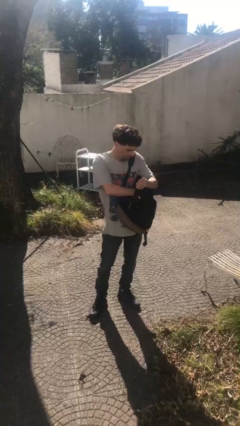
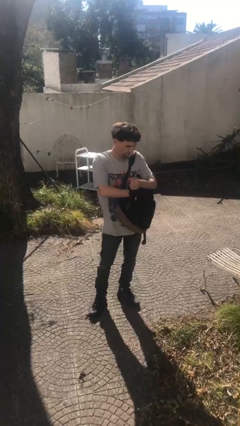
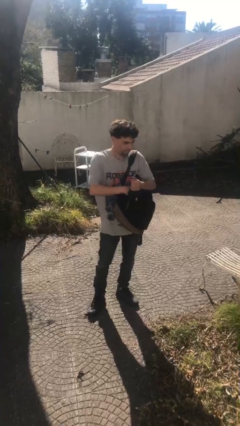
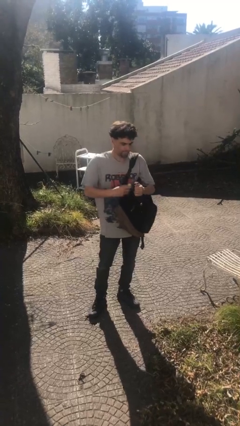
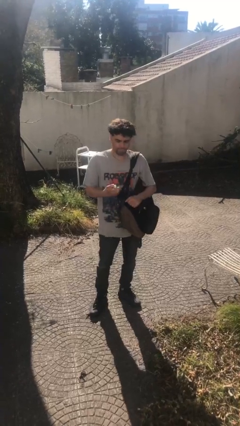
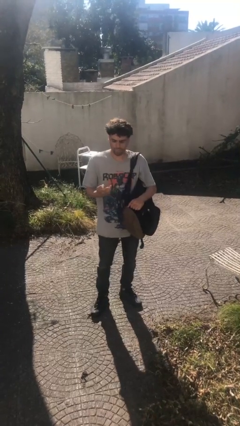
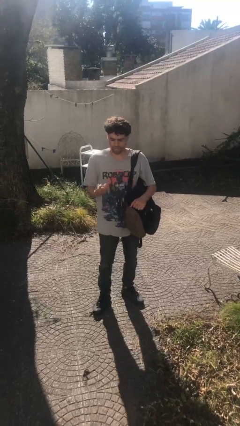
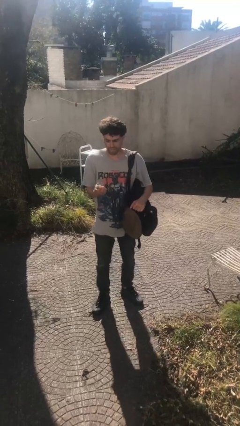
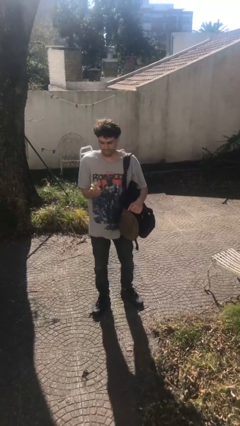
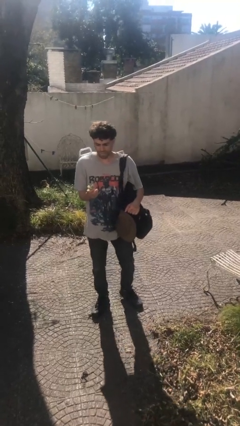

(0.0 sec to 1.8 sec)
person takes object from backpack

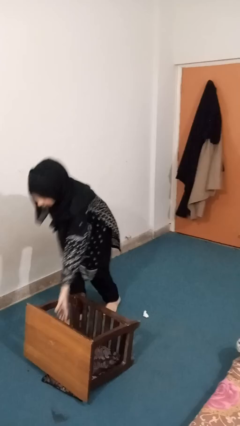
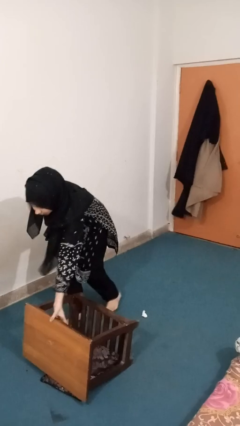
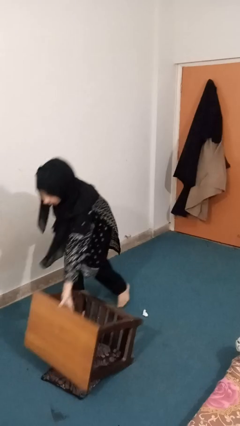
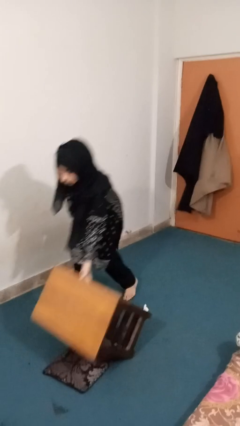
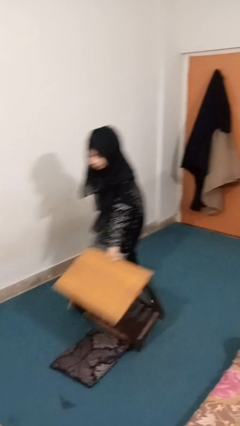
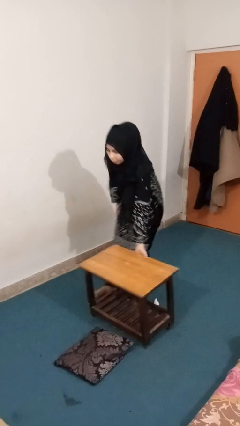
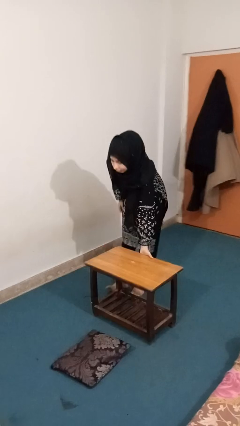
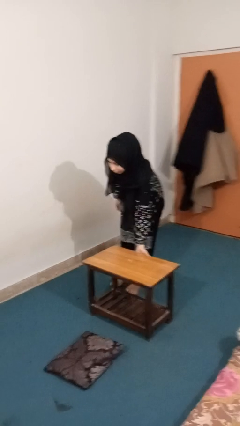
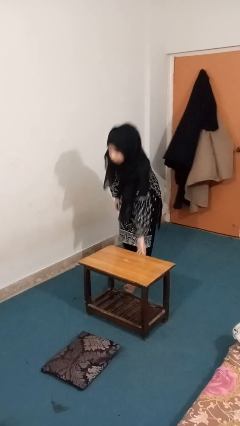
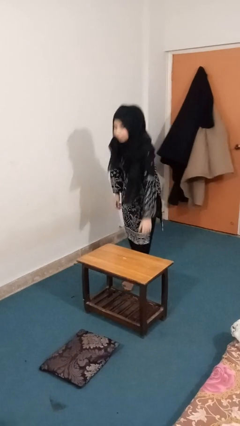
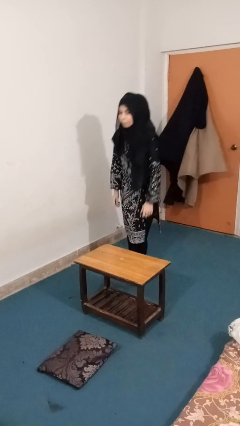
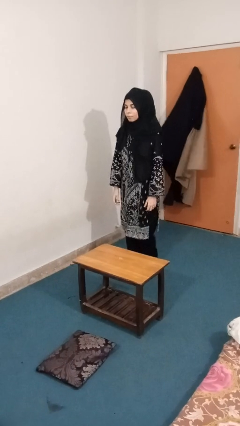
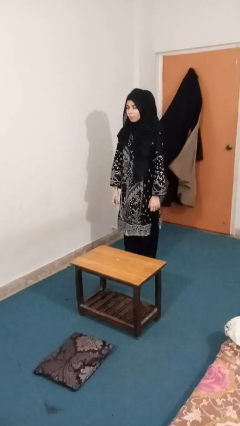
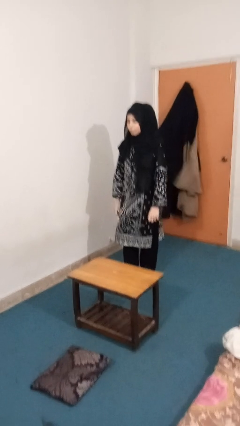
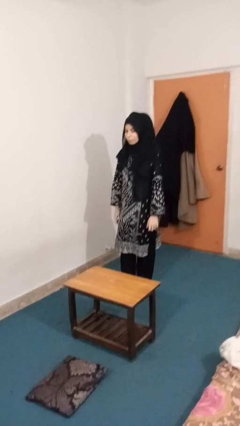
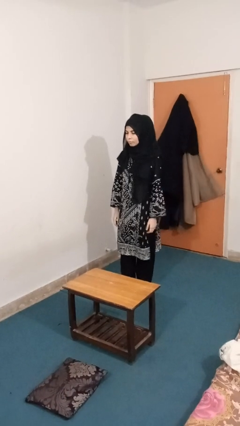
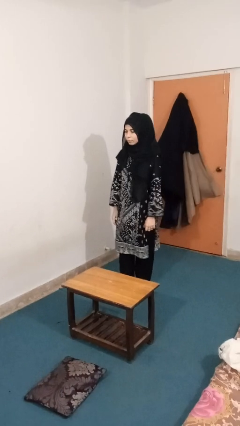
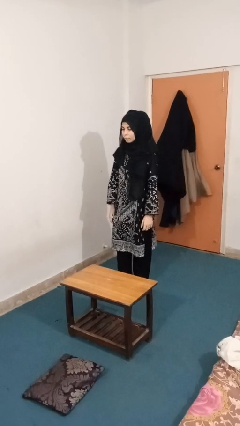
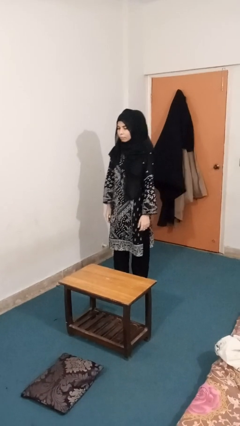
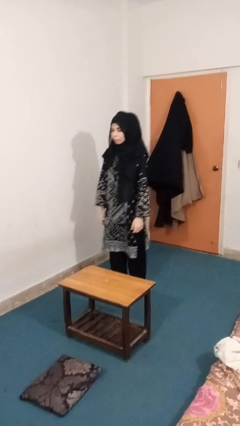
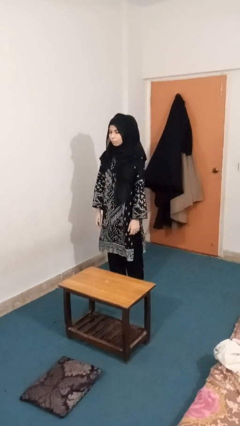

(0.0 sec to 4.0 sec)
person sets upright furniture

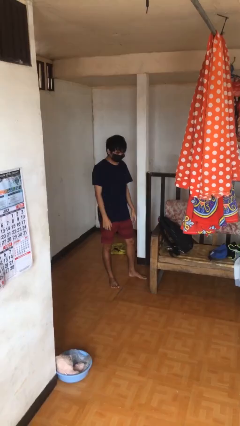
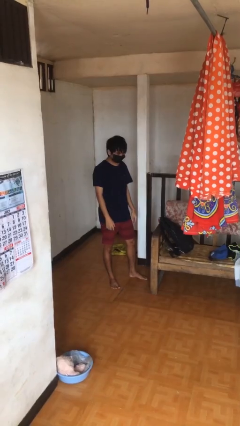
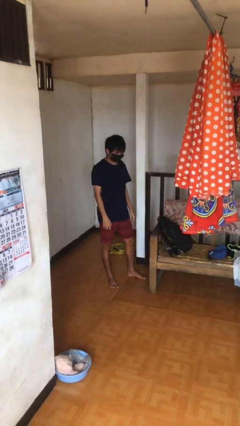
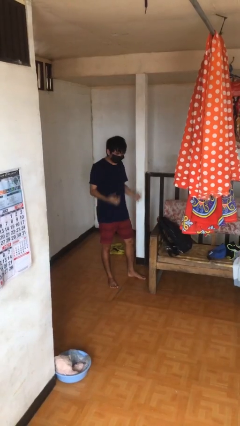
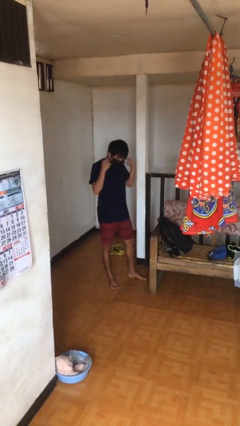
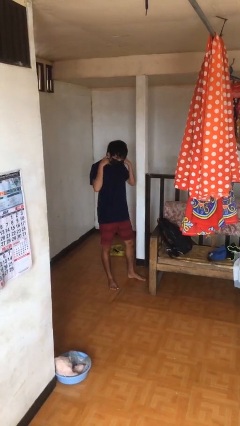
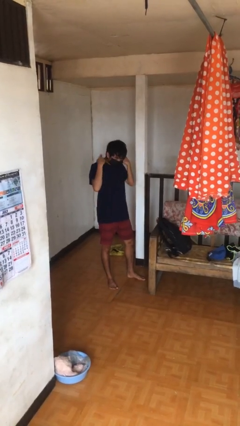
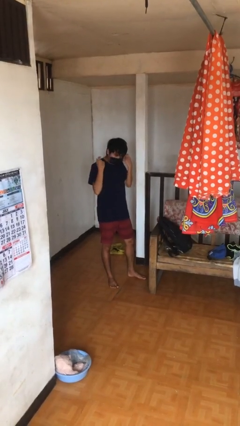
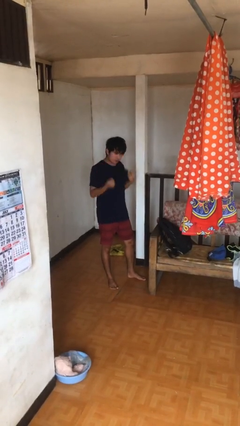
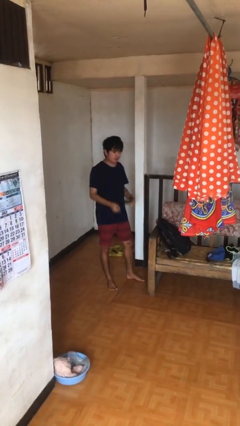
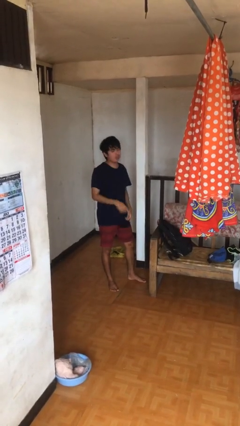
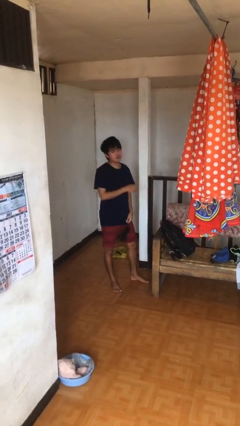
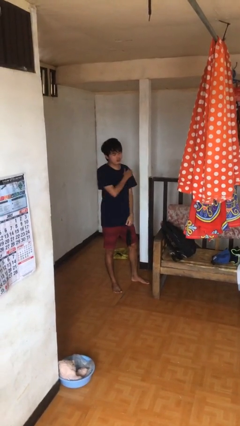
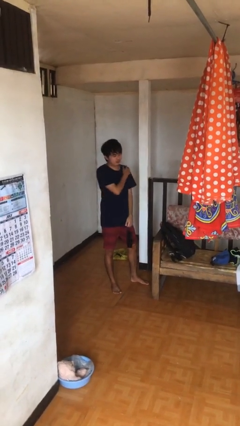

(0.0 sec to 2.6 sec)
person takes off facemask

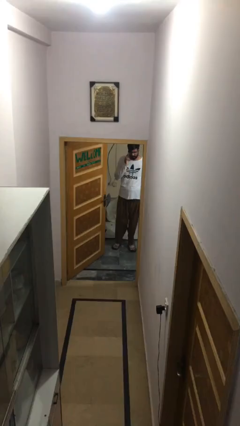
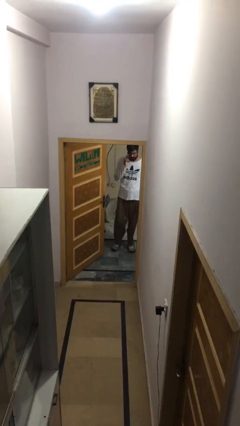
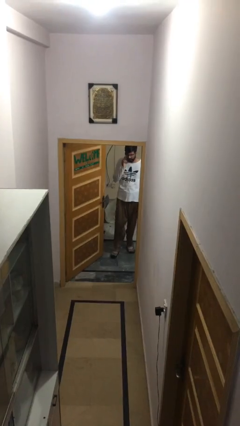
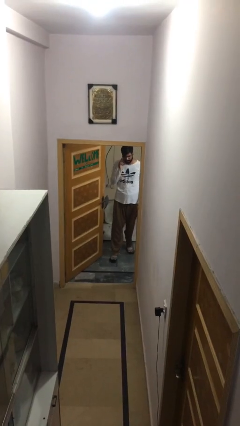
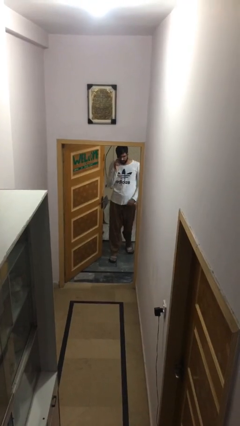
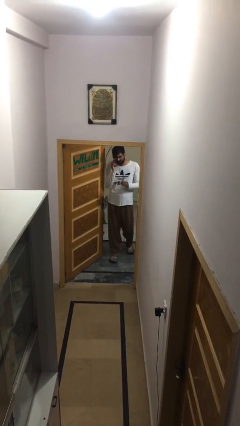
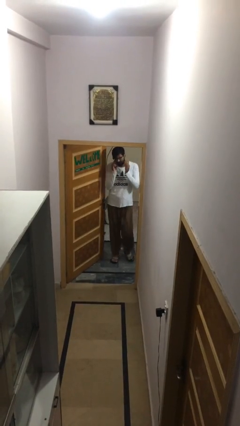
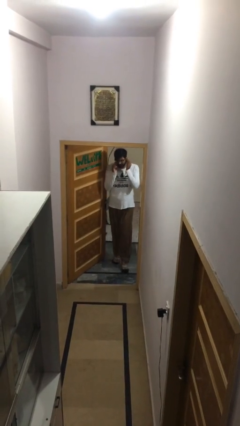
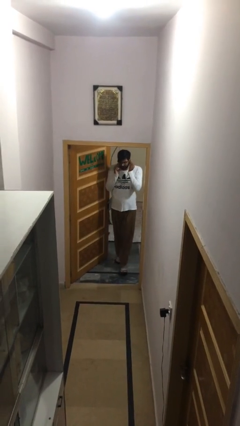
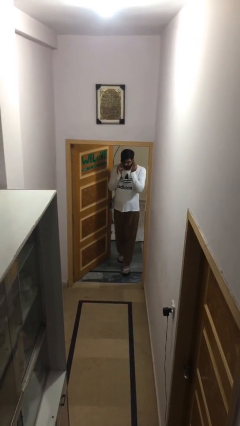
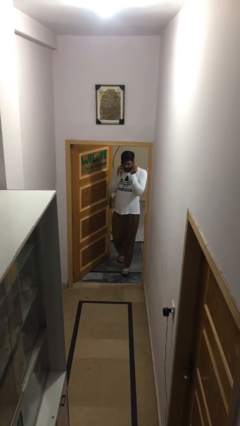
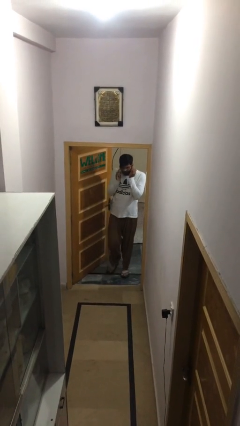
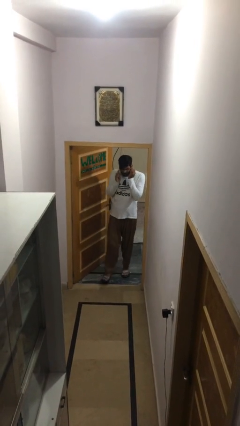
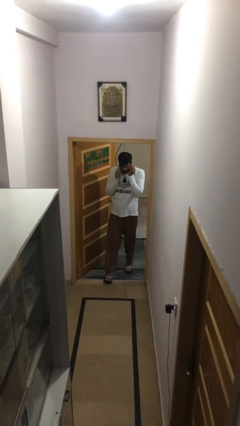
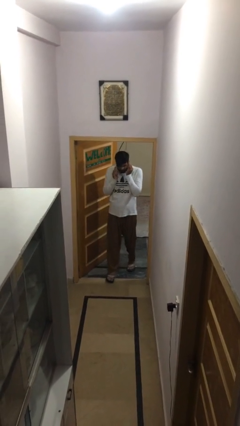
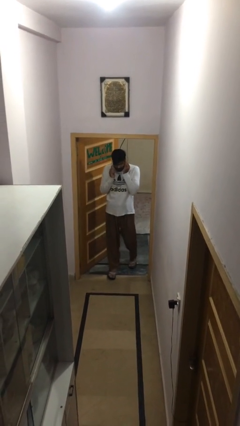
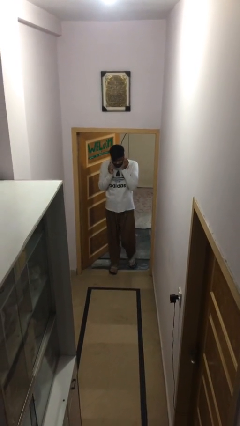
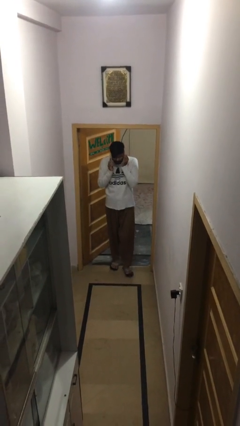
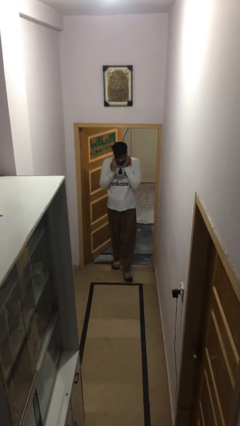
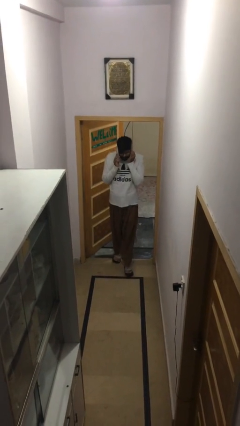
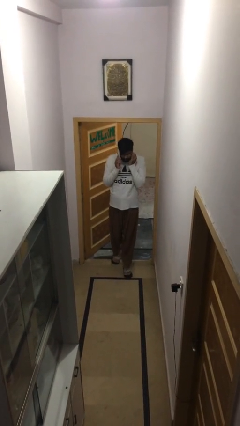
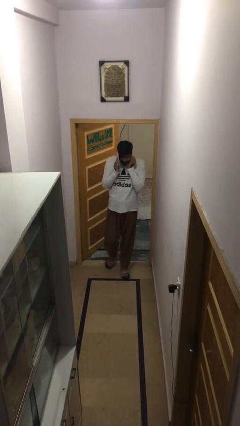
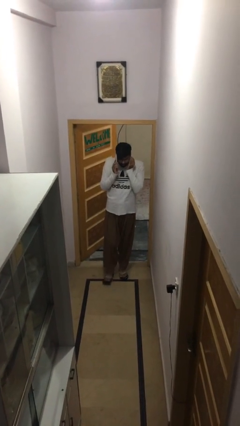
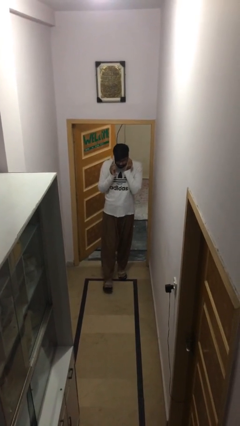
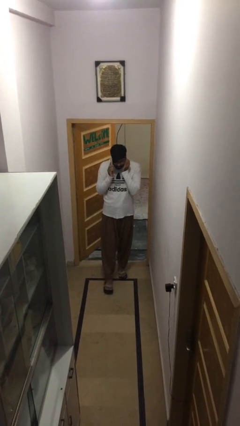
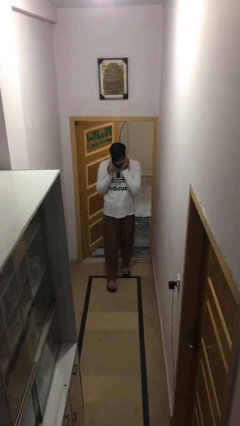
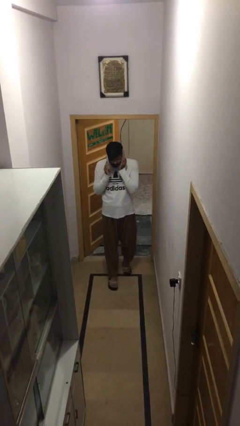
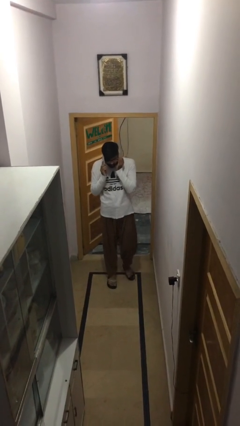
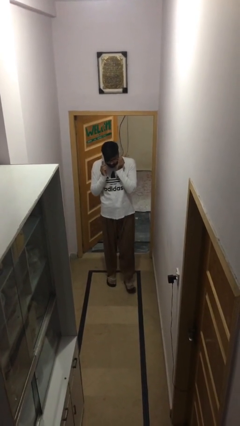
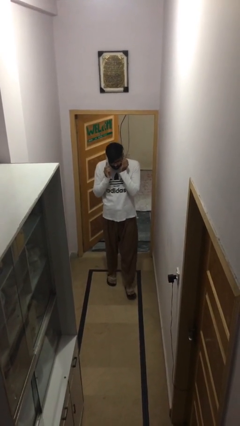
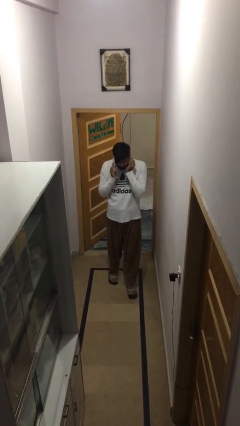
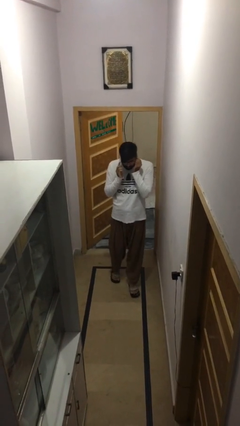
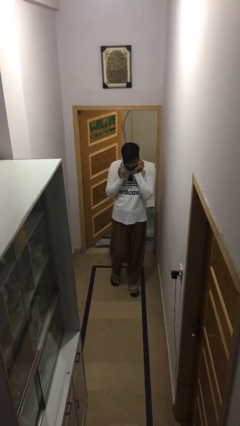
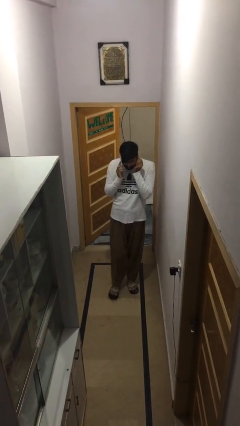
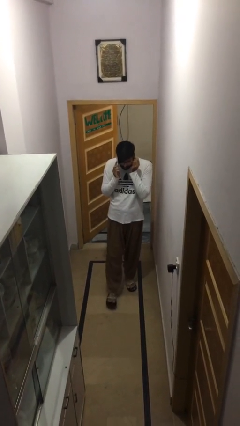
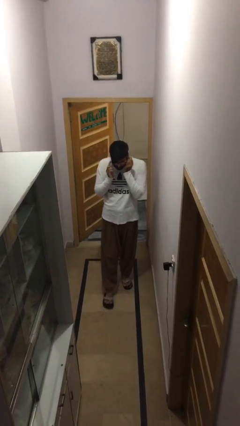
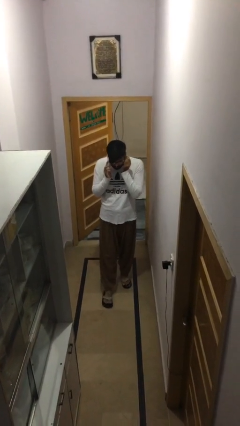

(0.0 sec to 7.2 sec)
person enters scene through structure

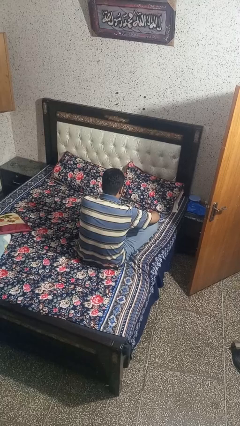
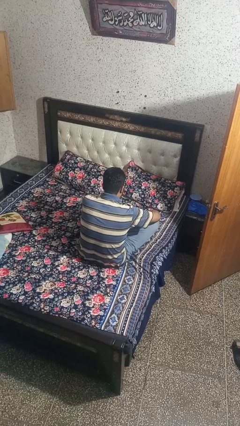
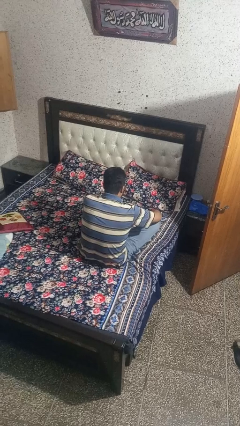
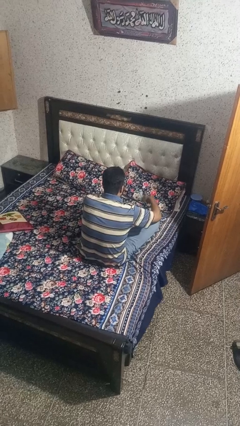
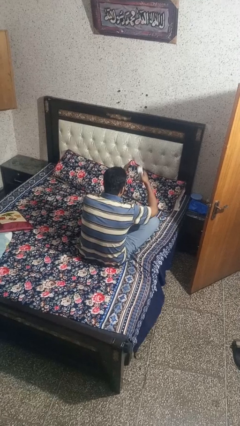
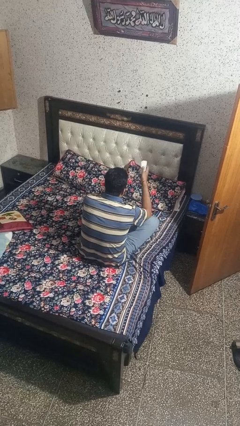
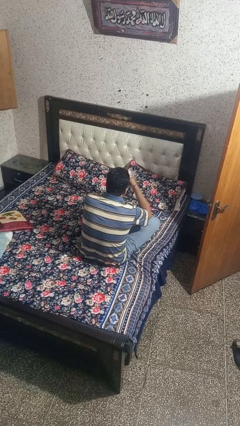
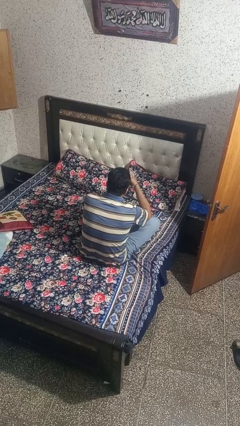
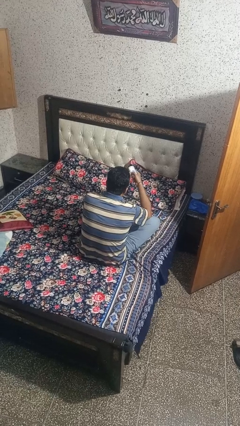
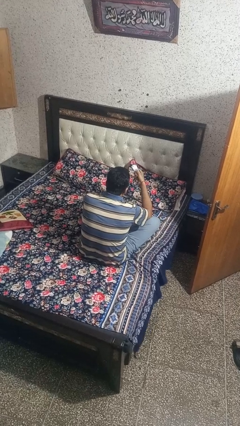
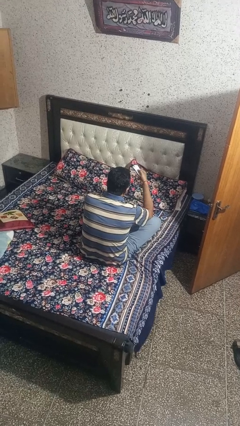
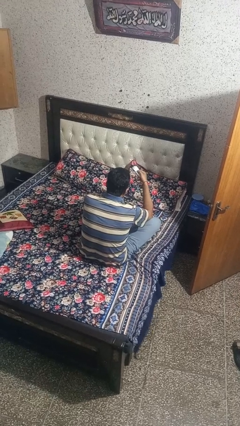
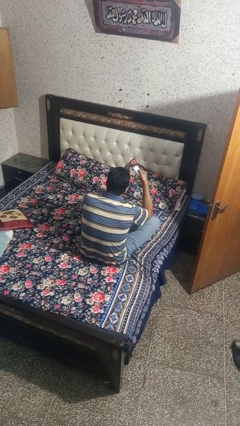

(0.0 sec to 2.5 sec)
person uses television remote
